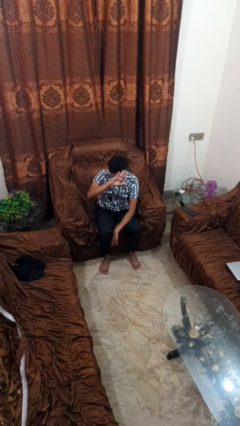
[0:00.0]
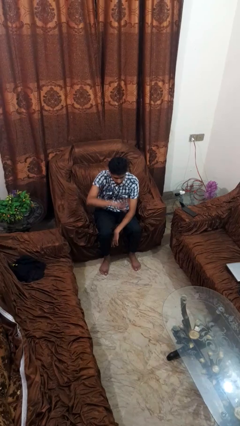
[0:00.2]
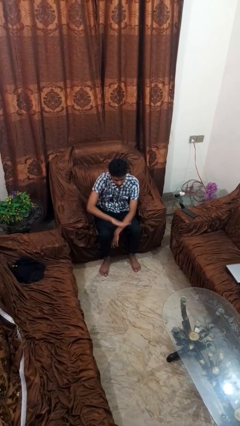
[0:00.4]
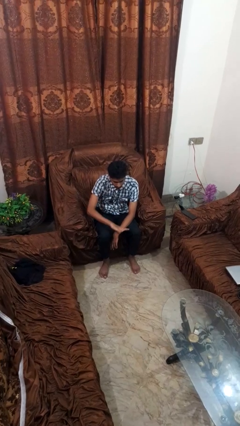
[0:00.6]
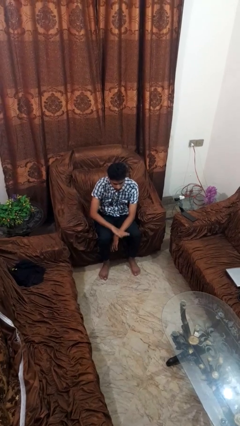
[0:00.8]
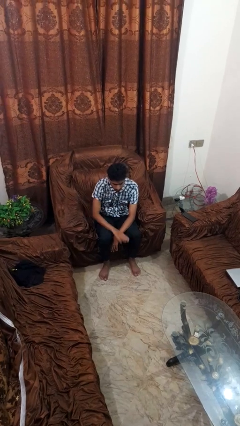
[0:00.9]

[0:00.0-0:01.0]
person gestures swipe down

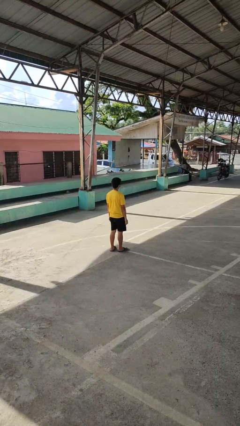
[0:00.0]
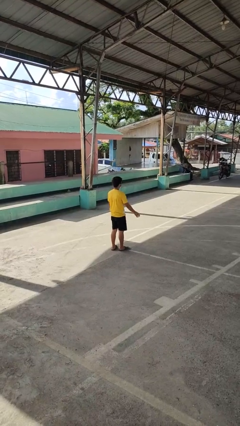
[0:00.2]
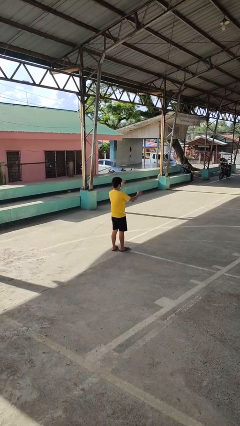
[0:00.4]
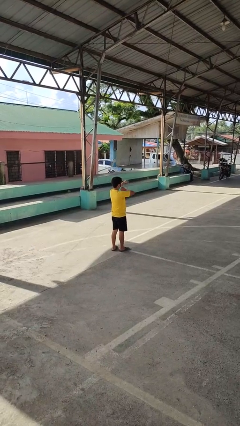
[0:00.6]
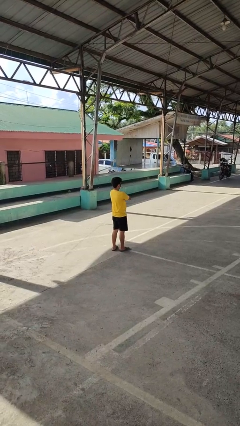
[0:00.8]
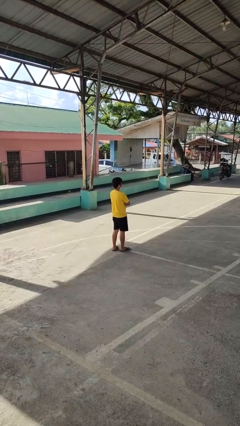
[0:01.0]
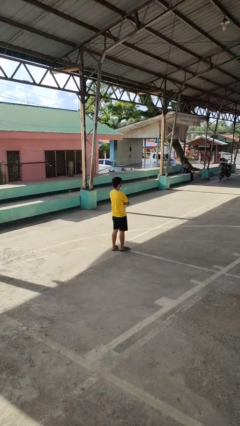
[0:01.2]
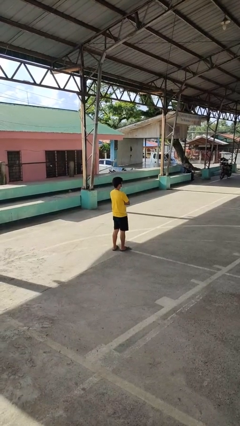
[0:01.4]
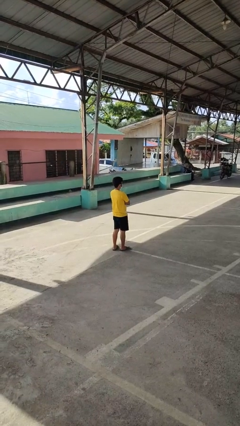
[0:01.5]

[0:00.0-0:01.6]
person crosses arms

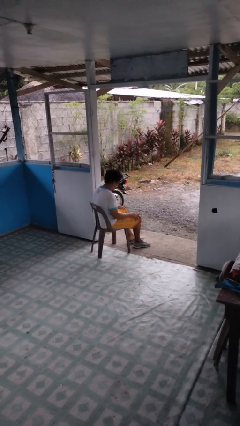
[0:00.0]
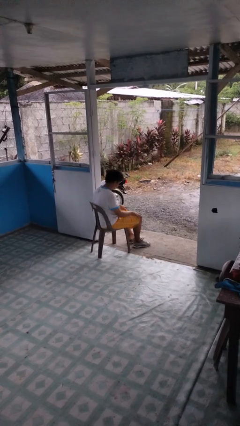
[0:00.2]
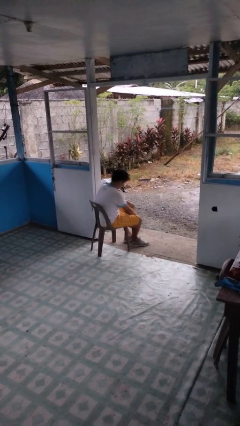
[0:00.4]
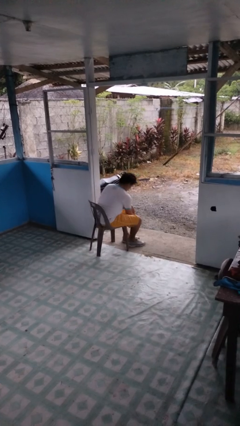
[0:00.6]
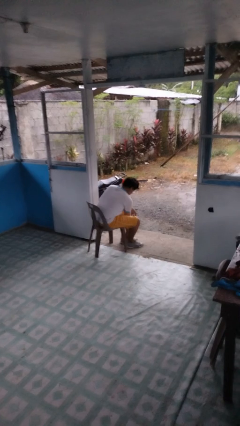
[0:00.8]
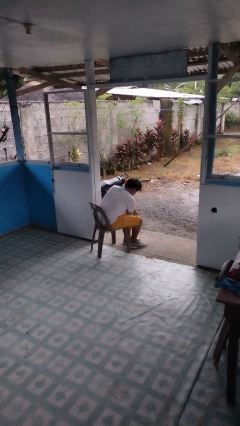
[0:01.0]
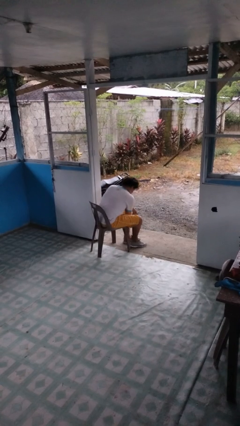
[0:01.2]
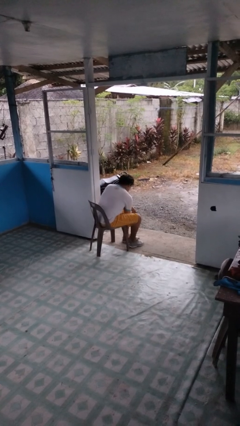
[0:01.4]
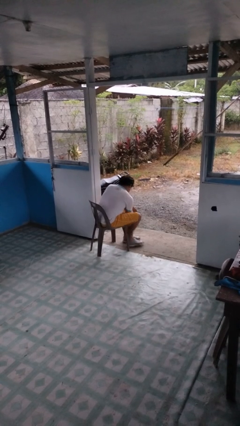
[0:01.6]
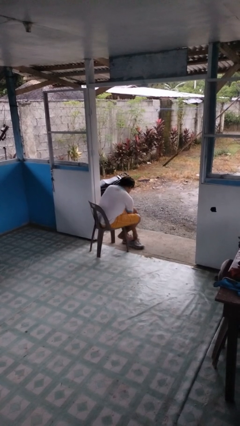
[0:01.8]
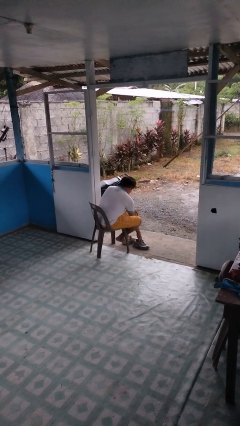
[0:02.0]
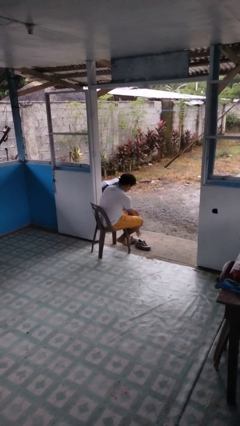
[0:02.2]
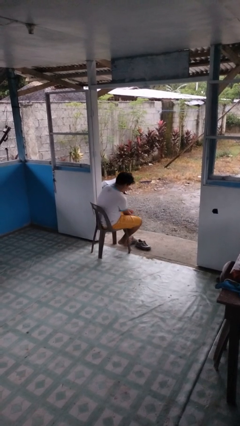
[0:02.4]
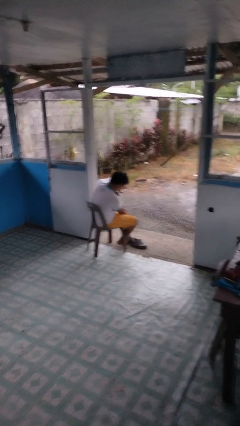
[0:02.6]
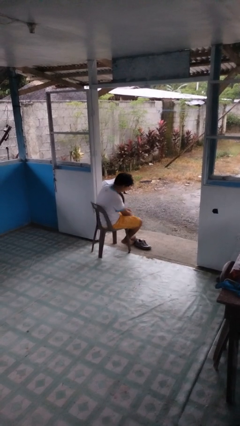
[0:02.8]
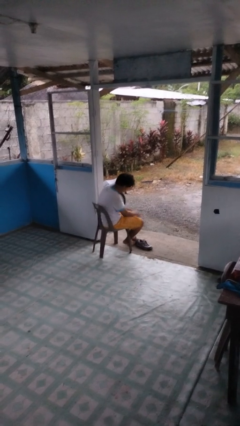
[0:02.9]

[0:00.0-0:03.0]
person takes off shoes

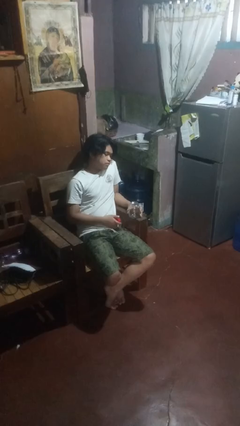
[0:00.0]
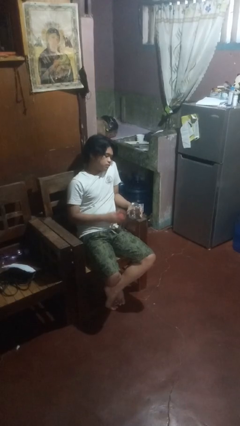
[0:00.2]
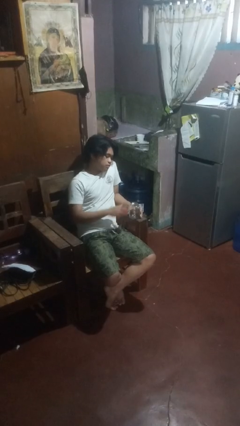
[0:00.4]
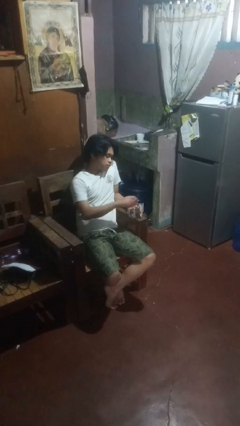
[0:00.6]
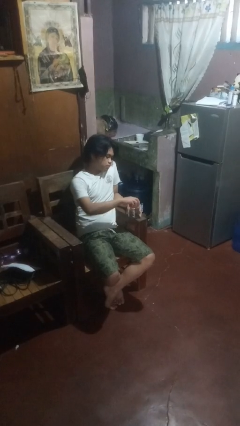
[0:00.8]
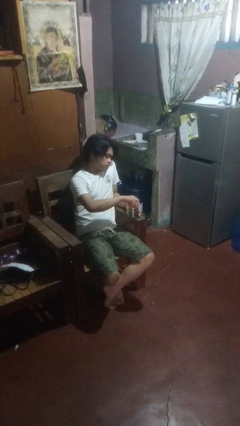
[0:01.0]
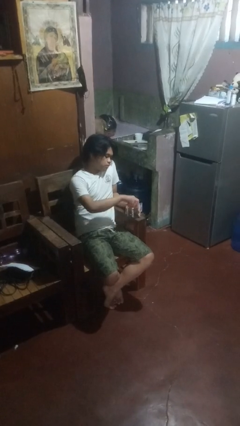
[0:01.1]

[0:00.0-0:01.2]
person closes jar

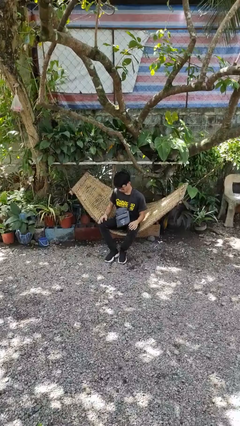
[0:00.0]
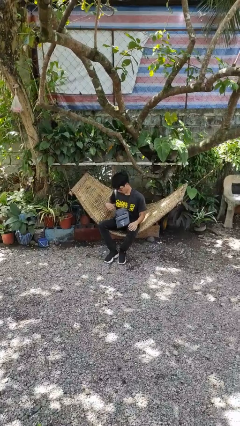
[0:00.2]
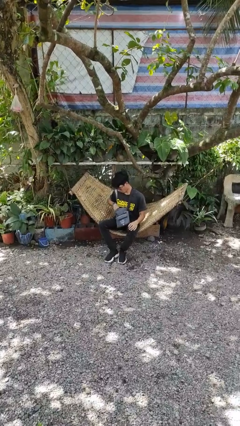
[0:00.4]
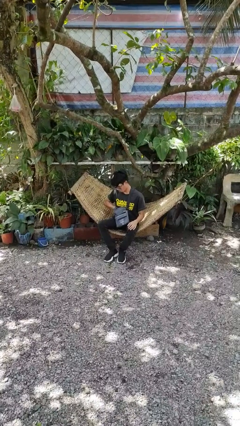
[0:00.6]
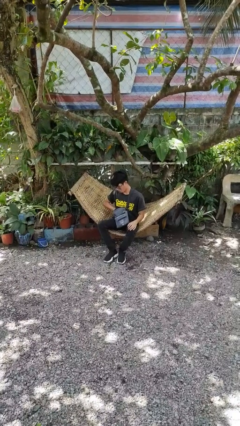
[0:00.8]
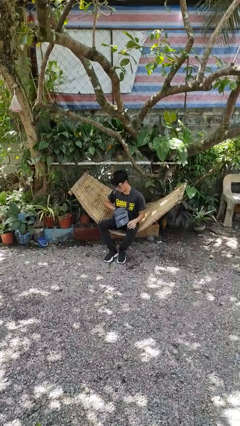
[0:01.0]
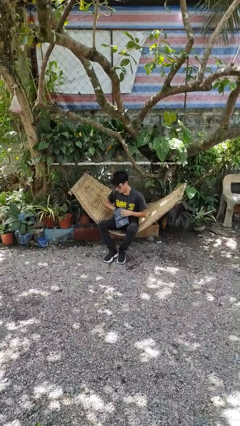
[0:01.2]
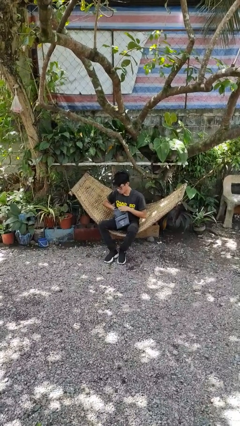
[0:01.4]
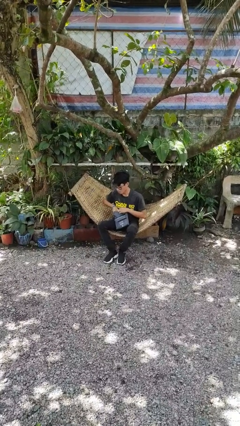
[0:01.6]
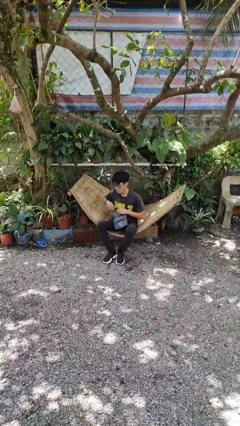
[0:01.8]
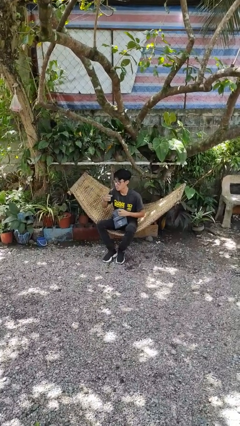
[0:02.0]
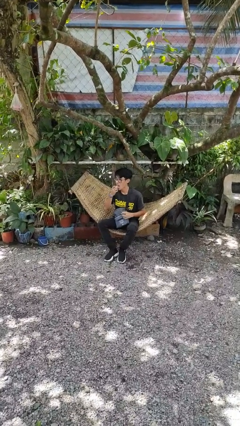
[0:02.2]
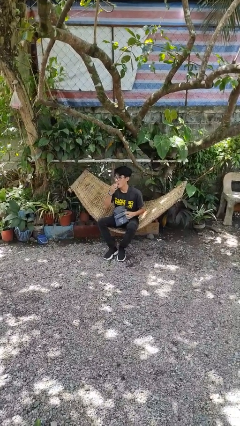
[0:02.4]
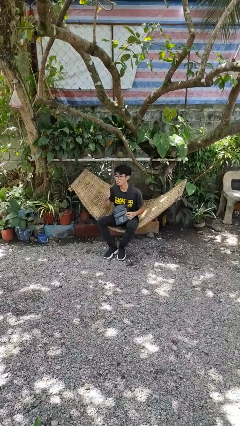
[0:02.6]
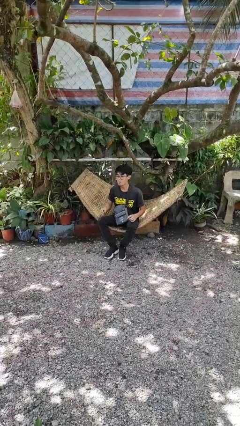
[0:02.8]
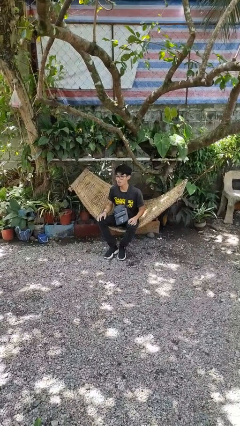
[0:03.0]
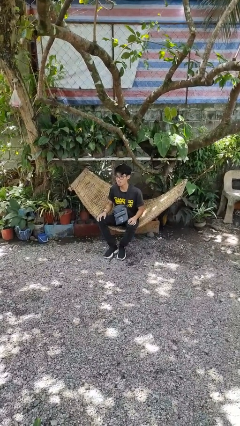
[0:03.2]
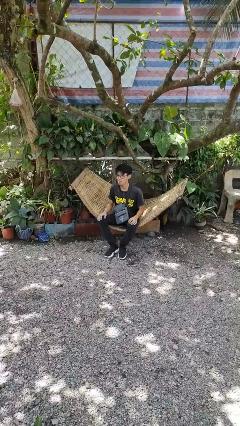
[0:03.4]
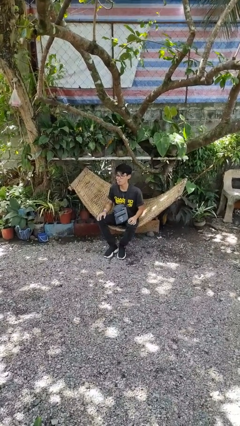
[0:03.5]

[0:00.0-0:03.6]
person eats snack from bag

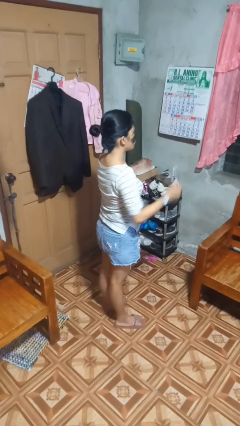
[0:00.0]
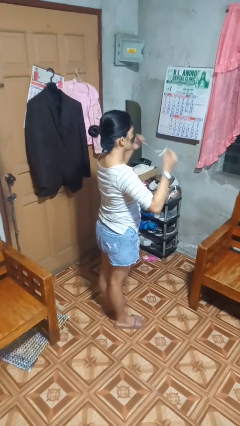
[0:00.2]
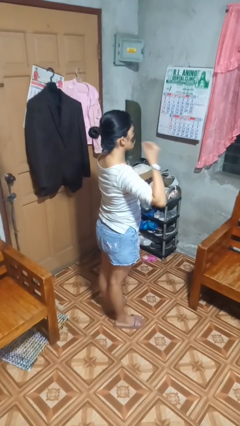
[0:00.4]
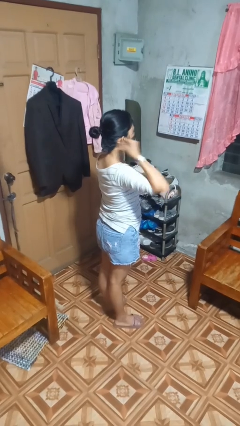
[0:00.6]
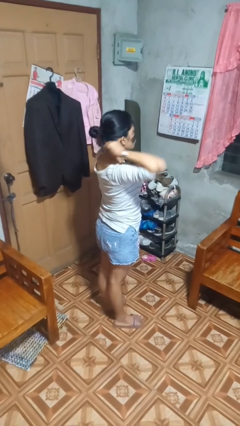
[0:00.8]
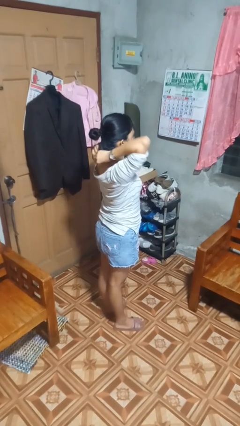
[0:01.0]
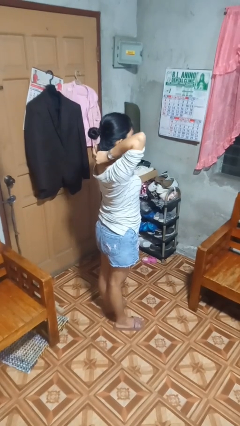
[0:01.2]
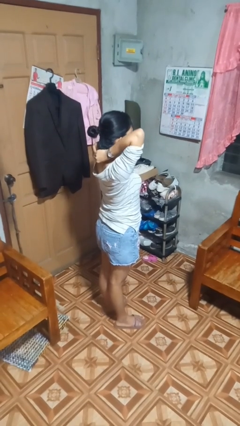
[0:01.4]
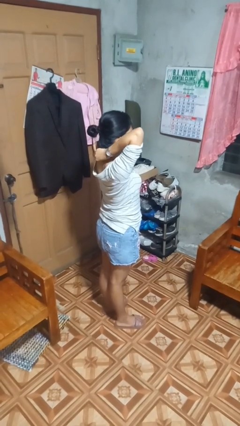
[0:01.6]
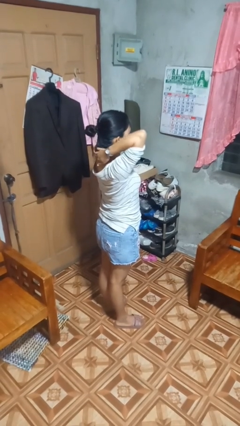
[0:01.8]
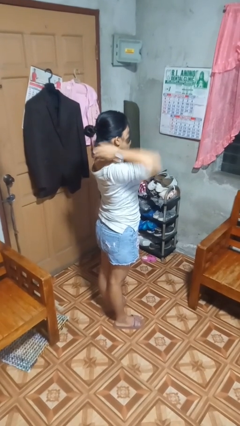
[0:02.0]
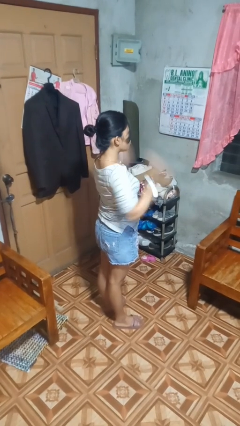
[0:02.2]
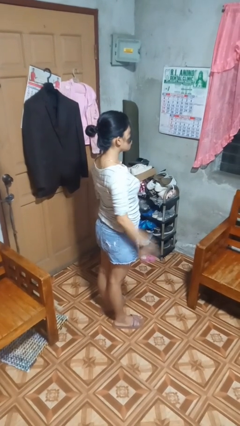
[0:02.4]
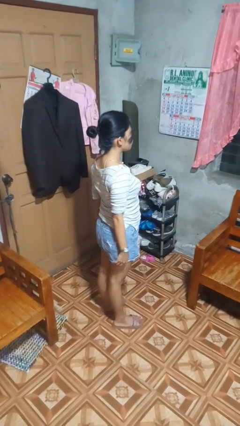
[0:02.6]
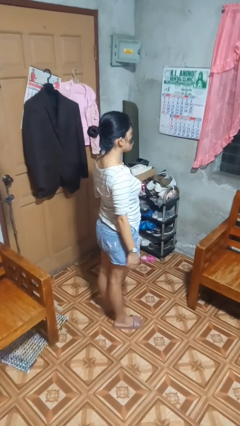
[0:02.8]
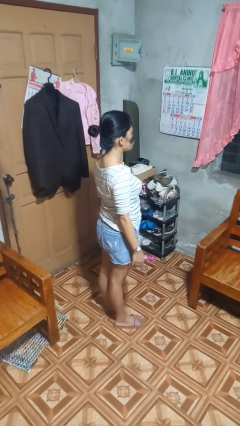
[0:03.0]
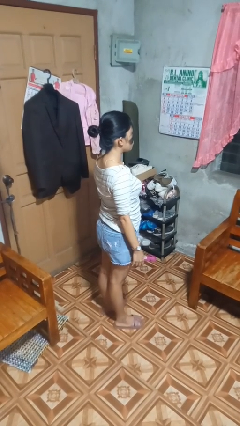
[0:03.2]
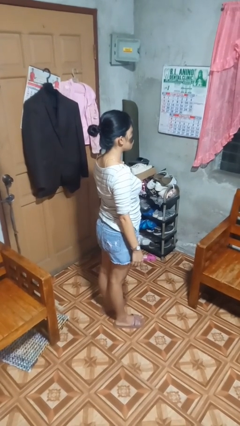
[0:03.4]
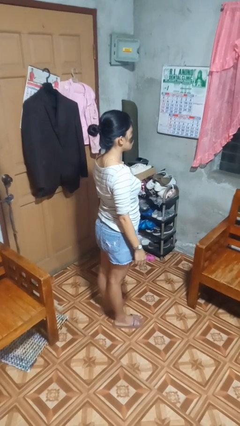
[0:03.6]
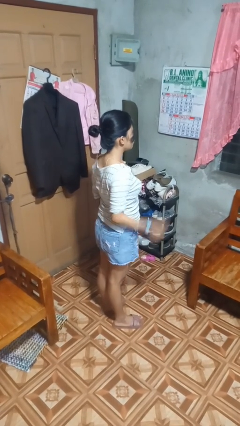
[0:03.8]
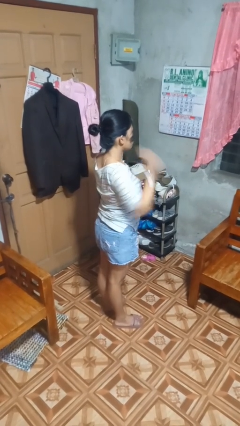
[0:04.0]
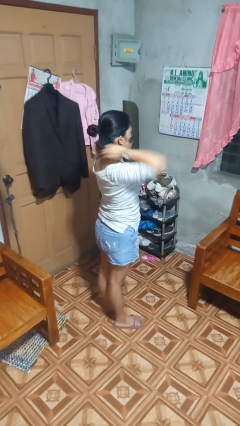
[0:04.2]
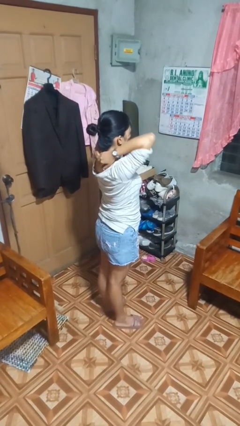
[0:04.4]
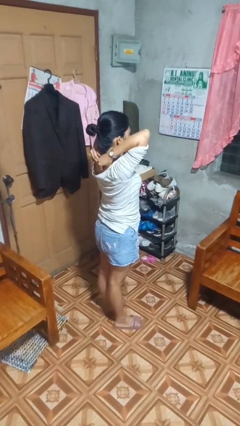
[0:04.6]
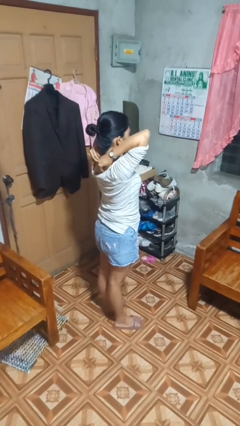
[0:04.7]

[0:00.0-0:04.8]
person puts on necklace

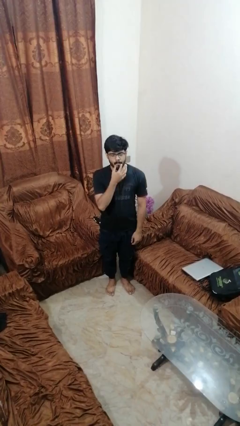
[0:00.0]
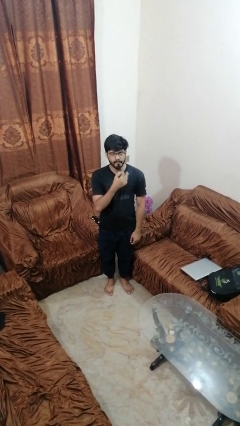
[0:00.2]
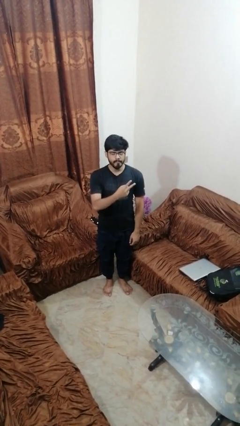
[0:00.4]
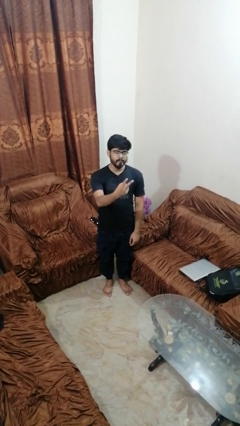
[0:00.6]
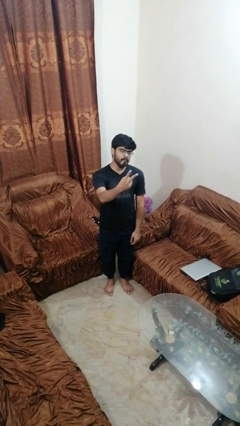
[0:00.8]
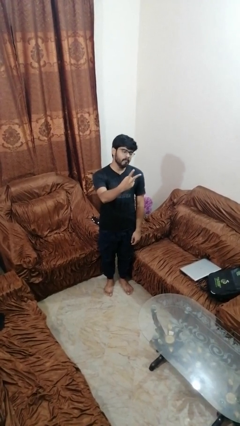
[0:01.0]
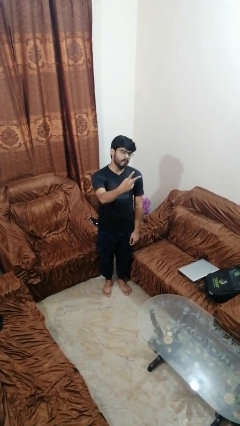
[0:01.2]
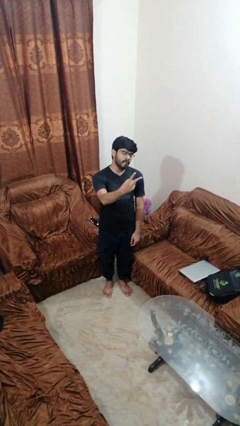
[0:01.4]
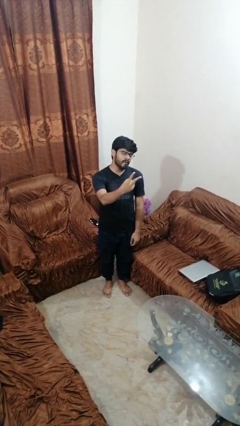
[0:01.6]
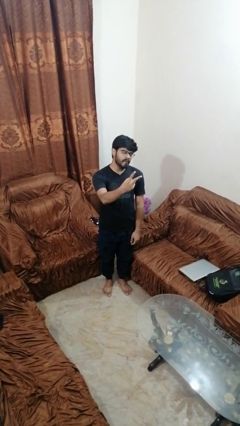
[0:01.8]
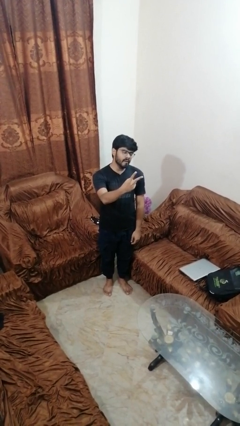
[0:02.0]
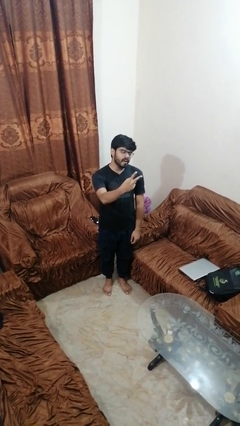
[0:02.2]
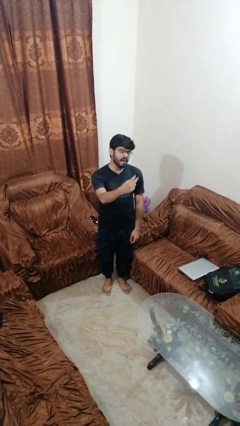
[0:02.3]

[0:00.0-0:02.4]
person gestures peace
